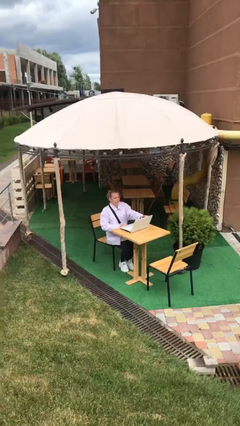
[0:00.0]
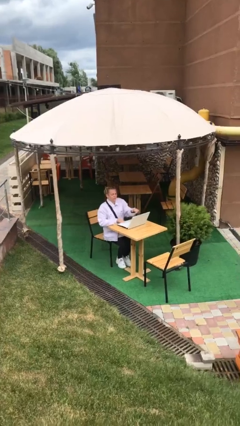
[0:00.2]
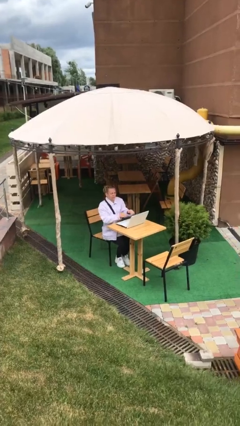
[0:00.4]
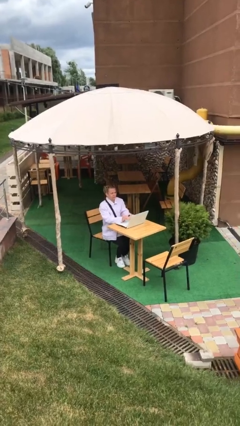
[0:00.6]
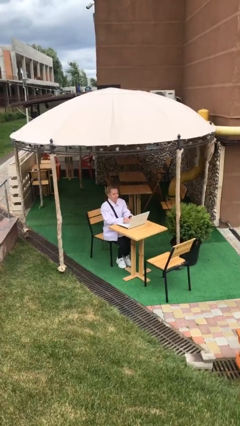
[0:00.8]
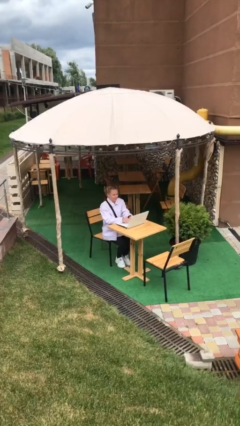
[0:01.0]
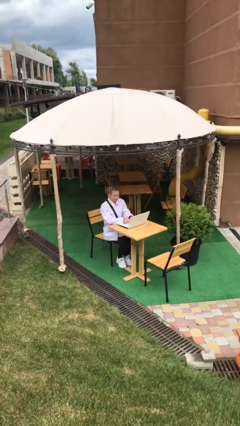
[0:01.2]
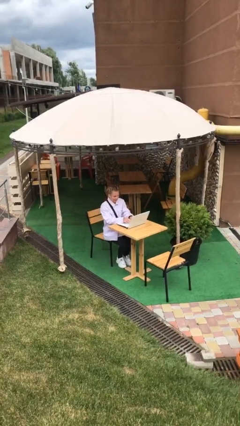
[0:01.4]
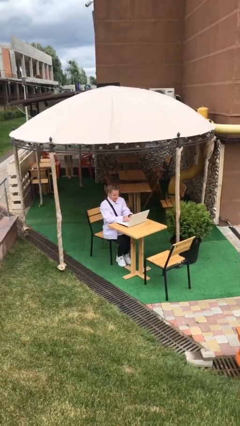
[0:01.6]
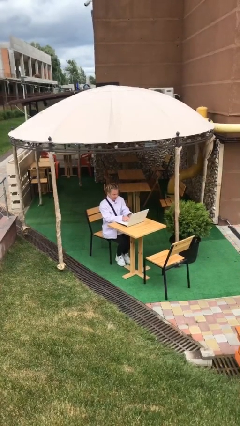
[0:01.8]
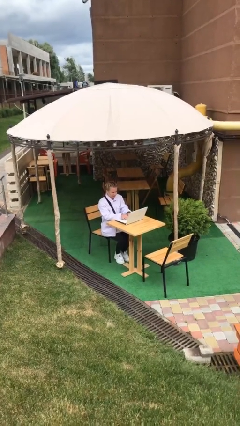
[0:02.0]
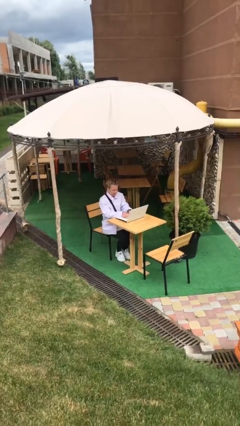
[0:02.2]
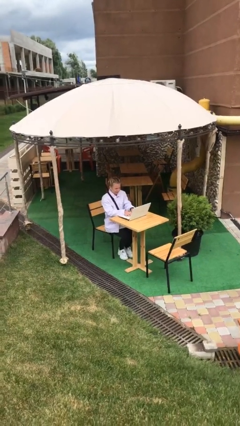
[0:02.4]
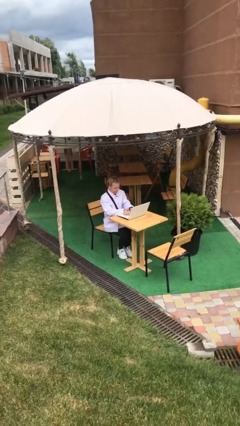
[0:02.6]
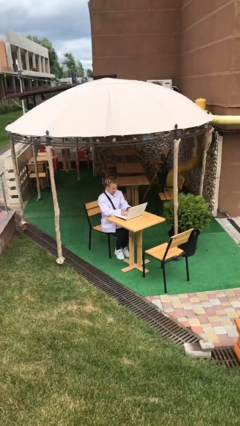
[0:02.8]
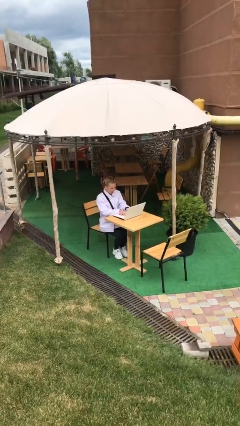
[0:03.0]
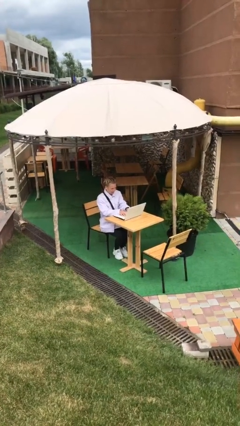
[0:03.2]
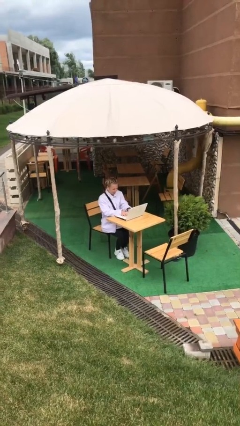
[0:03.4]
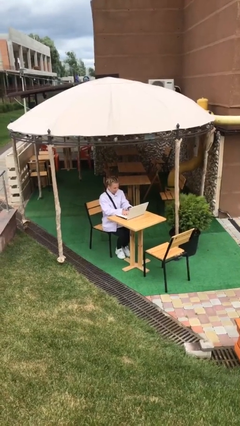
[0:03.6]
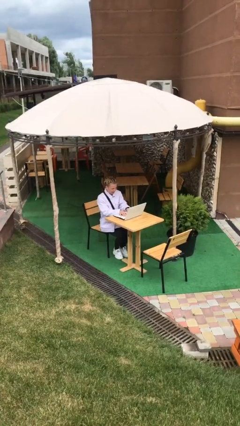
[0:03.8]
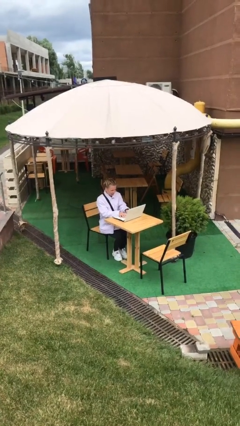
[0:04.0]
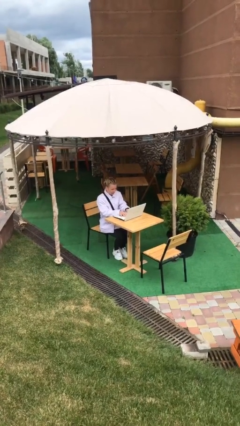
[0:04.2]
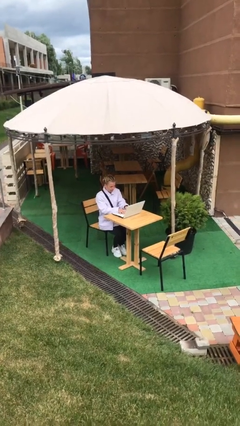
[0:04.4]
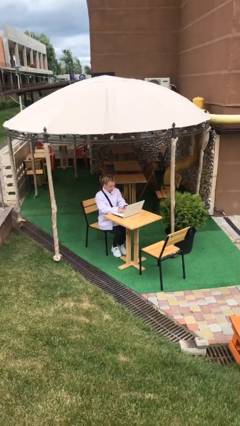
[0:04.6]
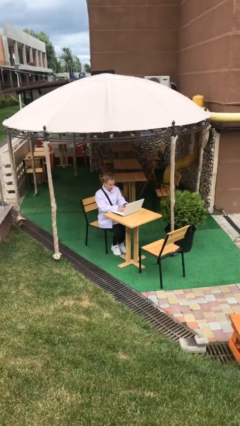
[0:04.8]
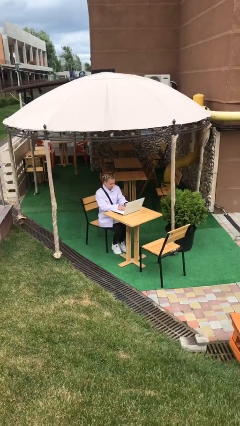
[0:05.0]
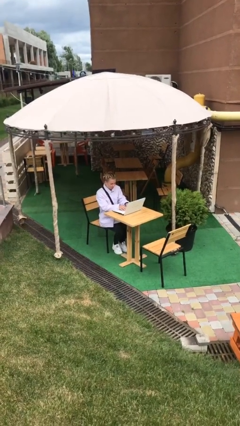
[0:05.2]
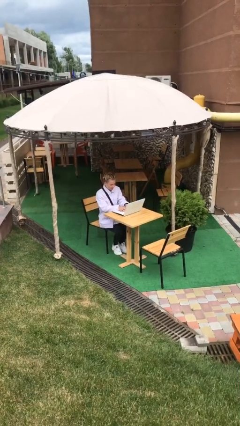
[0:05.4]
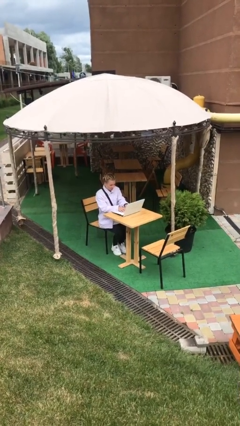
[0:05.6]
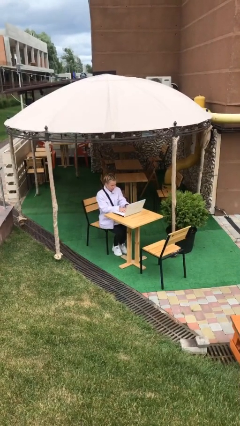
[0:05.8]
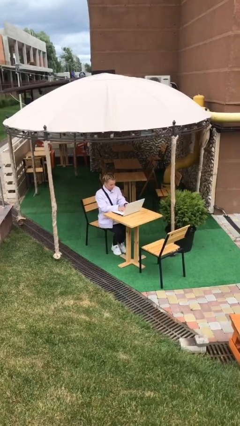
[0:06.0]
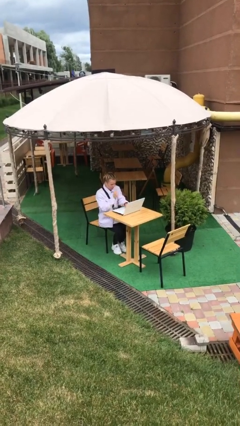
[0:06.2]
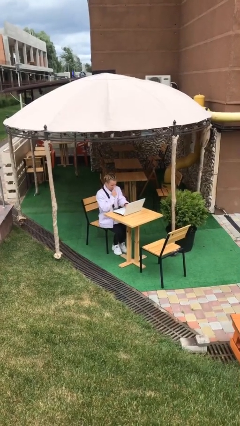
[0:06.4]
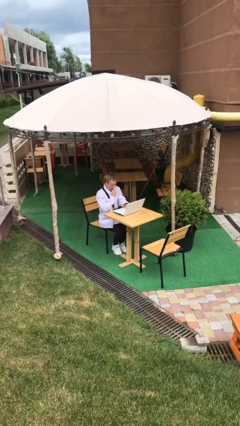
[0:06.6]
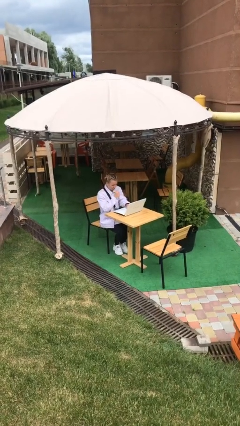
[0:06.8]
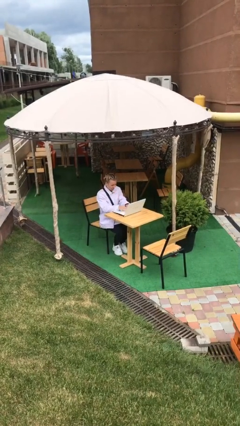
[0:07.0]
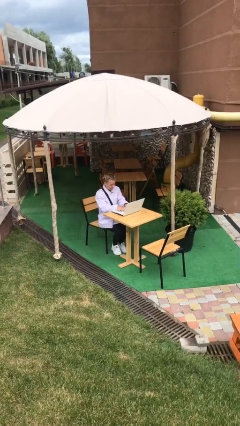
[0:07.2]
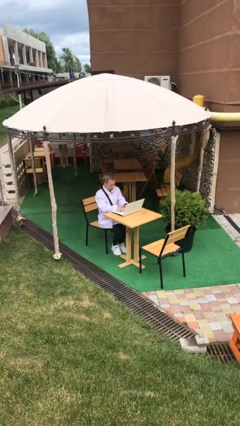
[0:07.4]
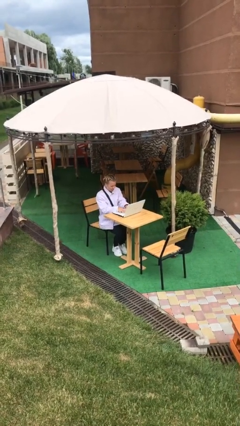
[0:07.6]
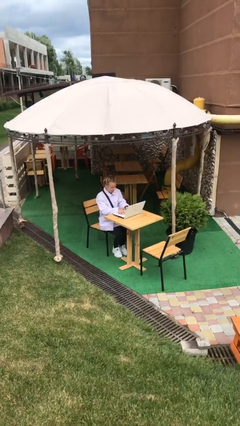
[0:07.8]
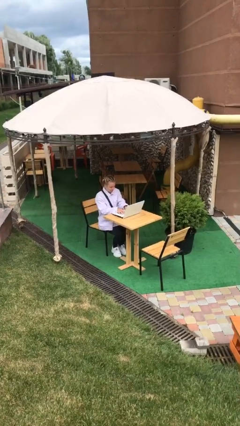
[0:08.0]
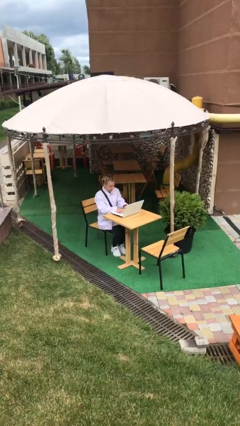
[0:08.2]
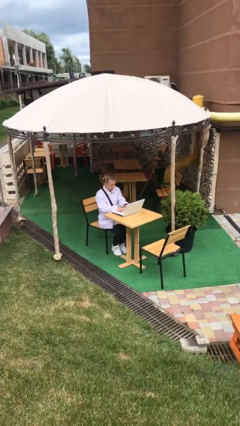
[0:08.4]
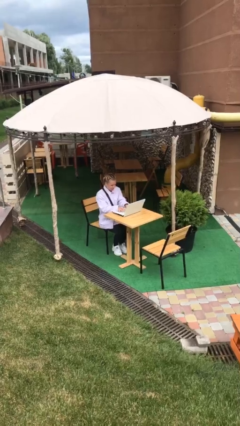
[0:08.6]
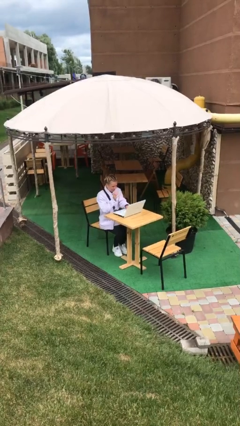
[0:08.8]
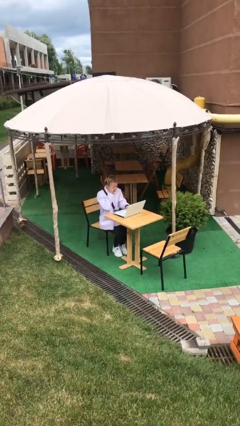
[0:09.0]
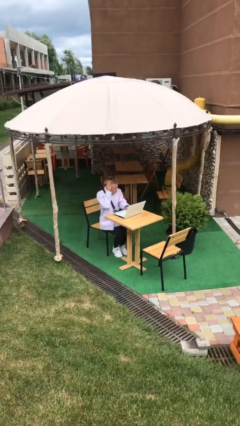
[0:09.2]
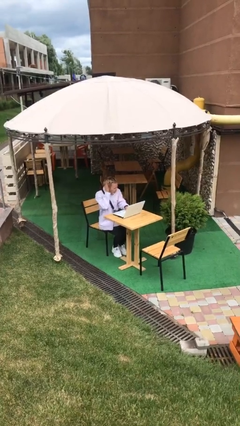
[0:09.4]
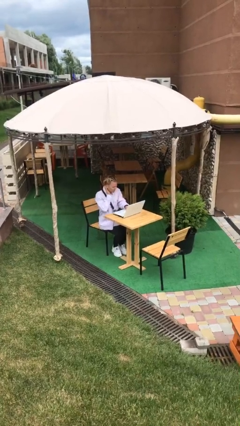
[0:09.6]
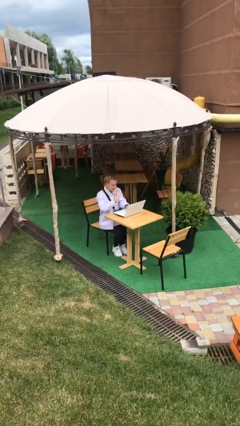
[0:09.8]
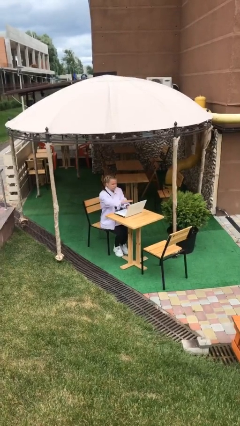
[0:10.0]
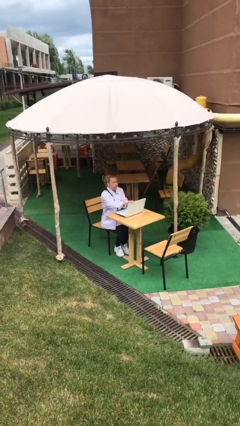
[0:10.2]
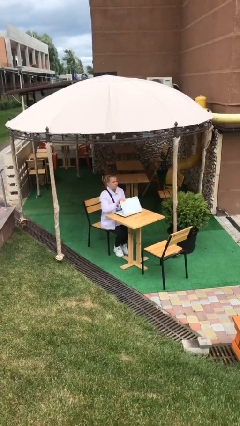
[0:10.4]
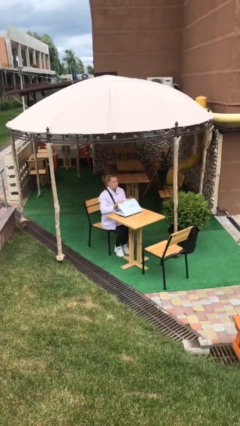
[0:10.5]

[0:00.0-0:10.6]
person interacts with laptop

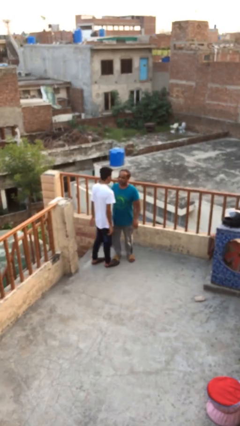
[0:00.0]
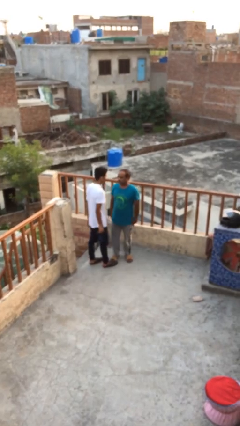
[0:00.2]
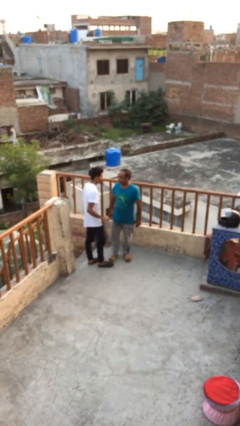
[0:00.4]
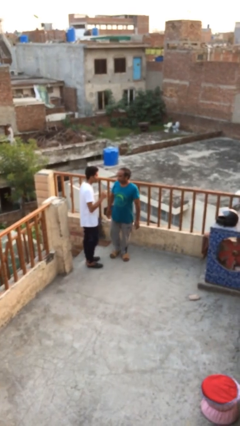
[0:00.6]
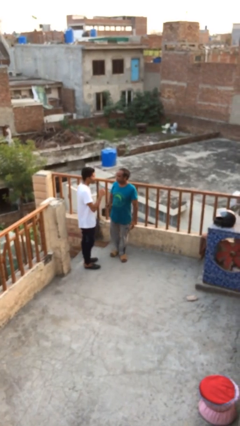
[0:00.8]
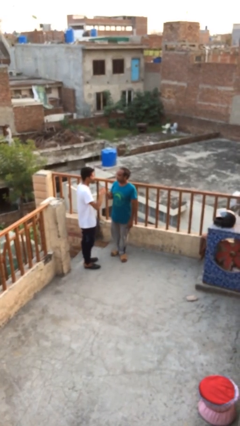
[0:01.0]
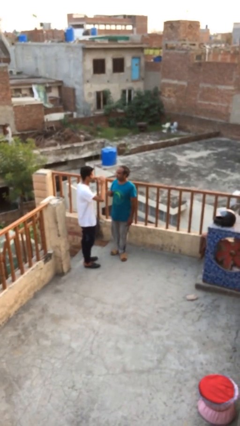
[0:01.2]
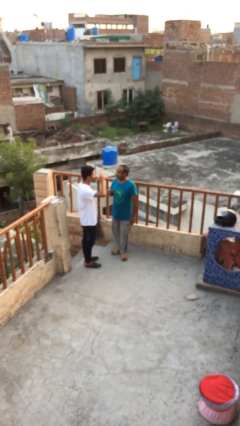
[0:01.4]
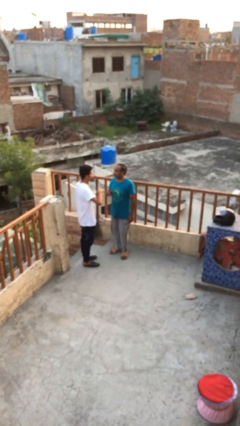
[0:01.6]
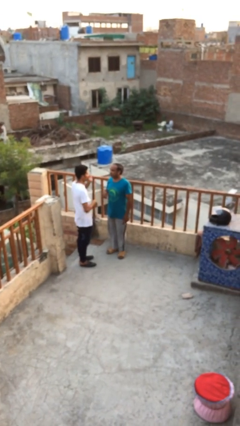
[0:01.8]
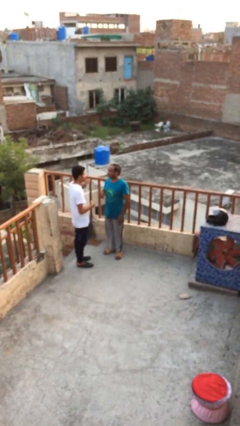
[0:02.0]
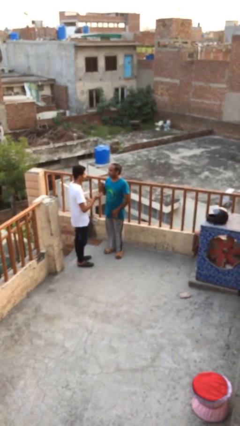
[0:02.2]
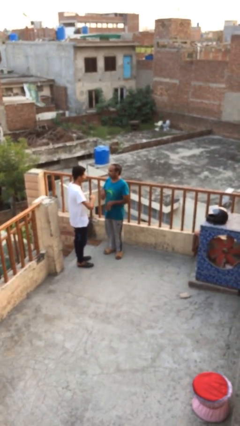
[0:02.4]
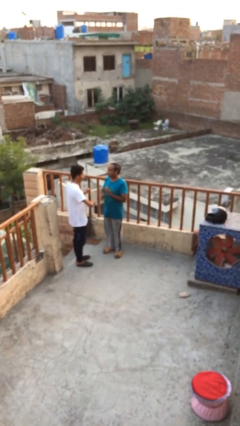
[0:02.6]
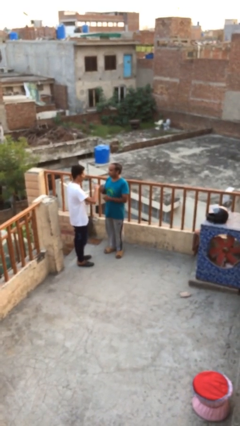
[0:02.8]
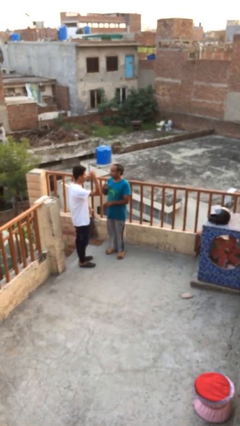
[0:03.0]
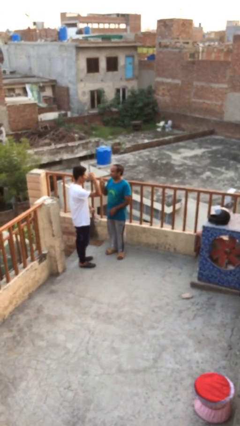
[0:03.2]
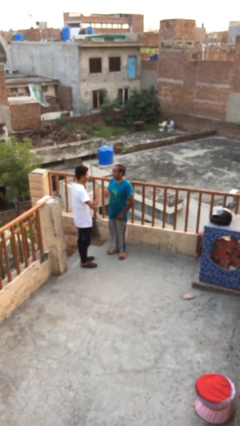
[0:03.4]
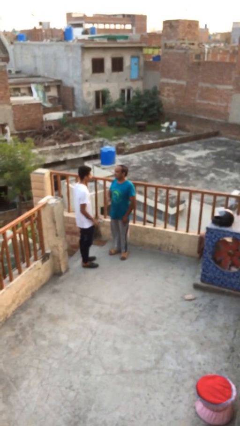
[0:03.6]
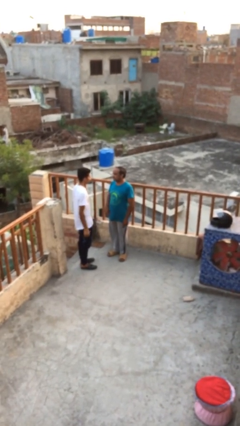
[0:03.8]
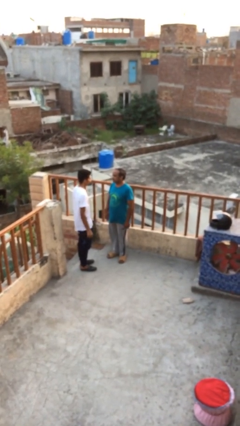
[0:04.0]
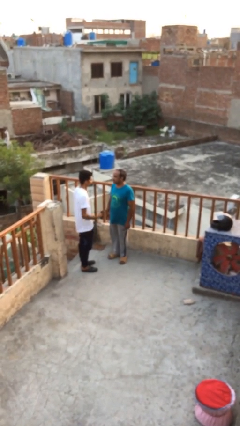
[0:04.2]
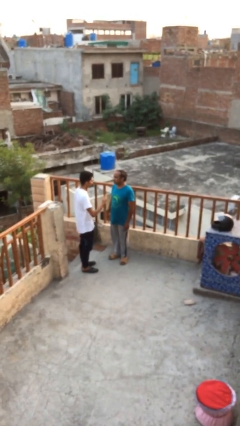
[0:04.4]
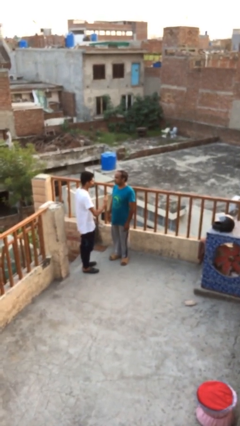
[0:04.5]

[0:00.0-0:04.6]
person talks to person

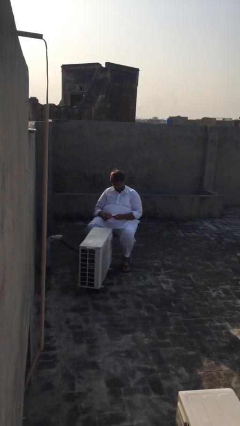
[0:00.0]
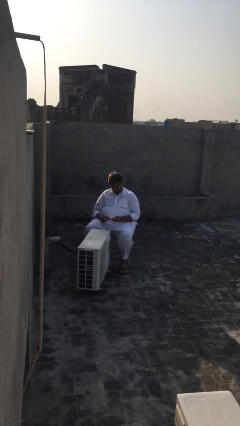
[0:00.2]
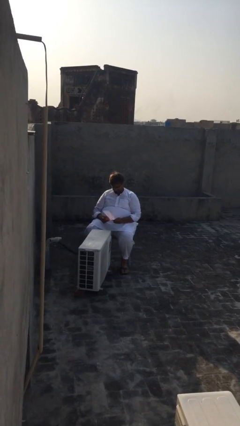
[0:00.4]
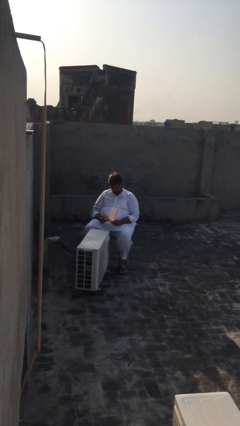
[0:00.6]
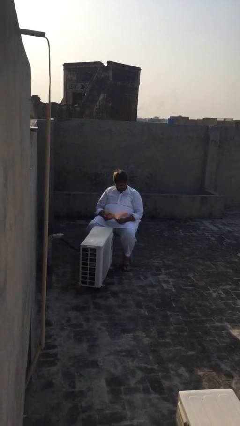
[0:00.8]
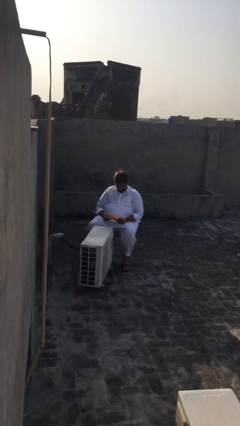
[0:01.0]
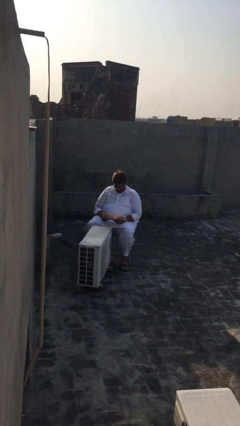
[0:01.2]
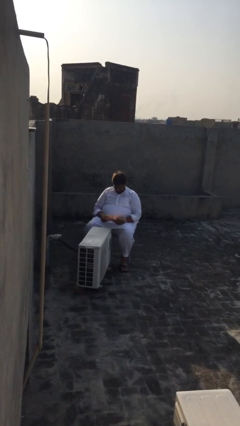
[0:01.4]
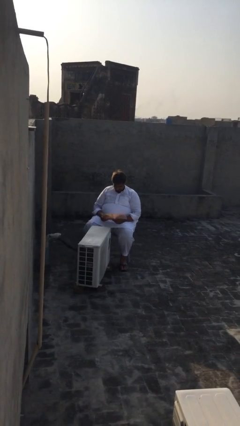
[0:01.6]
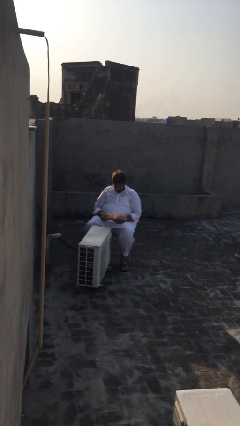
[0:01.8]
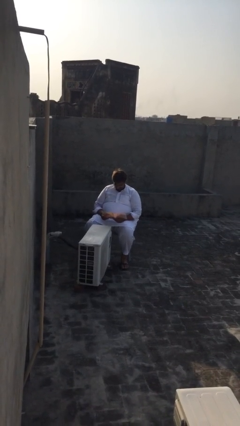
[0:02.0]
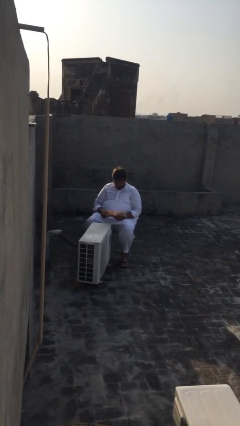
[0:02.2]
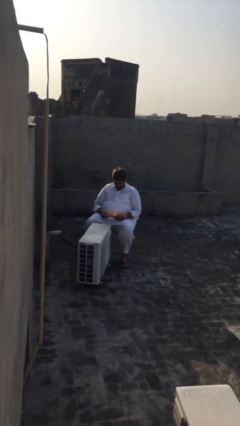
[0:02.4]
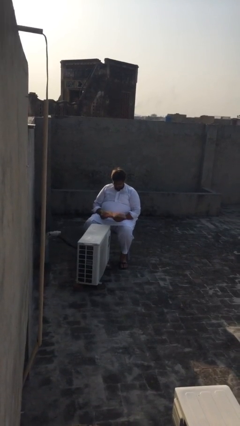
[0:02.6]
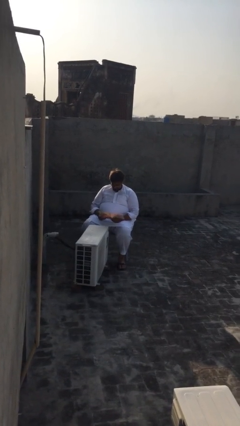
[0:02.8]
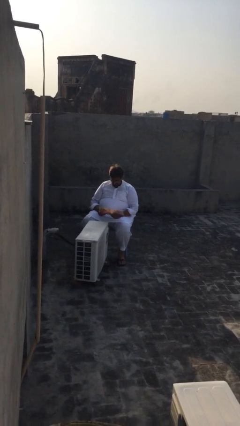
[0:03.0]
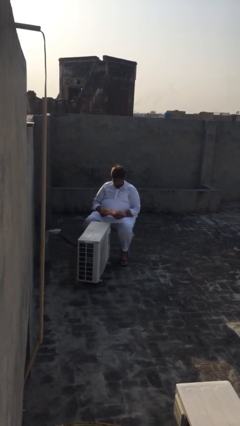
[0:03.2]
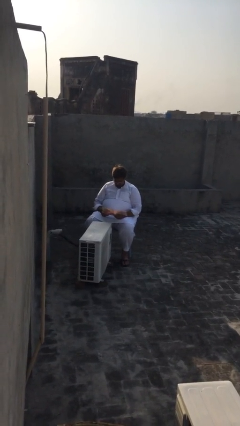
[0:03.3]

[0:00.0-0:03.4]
person reads document
